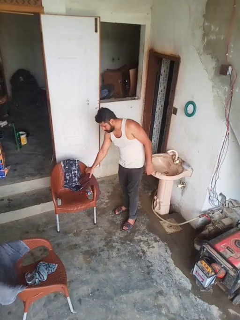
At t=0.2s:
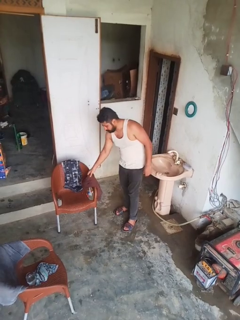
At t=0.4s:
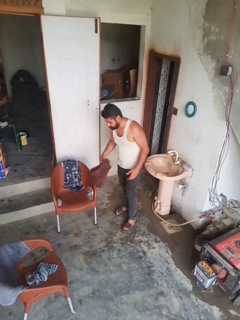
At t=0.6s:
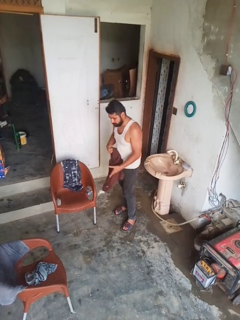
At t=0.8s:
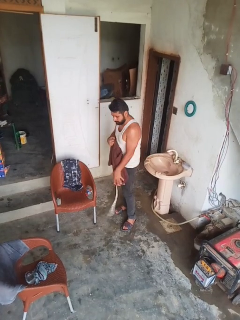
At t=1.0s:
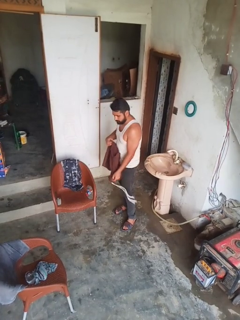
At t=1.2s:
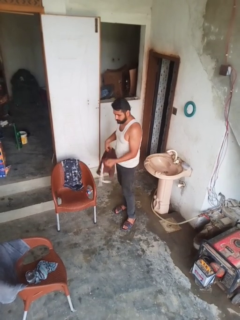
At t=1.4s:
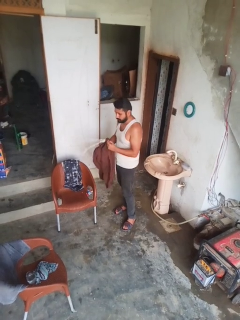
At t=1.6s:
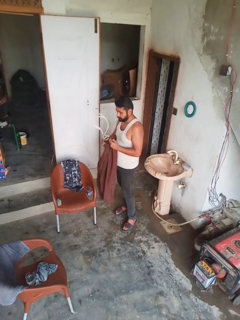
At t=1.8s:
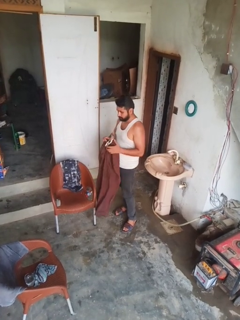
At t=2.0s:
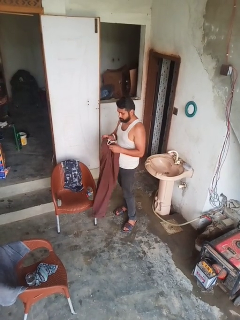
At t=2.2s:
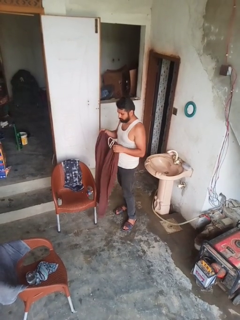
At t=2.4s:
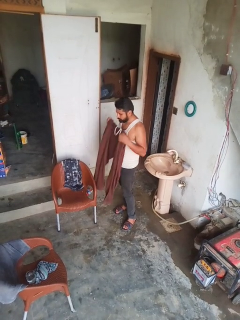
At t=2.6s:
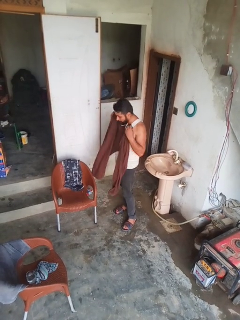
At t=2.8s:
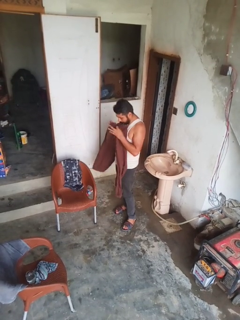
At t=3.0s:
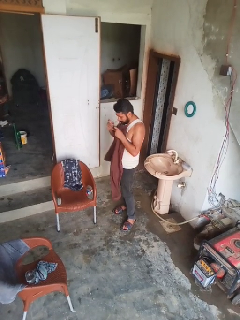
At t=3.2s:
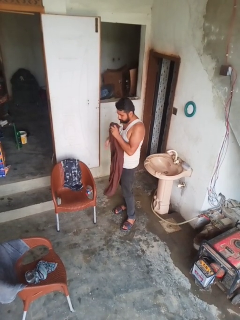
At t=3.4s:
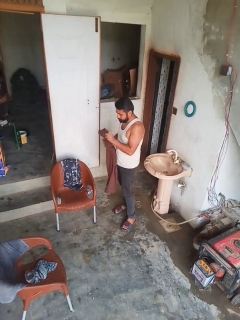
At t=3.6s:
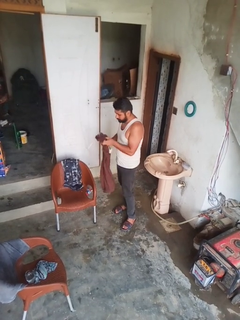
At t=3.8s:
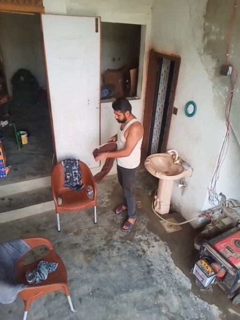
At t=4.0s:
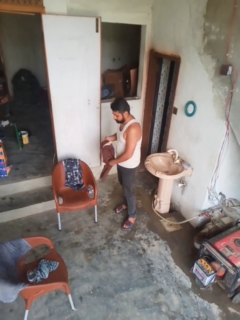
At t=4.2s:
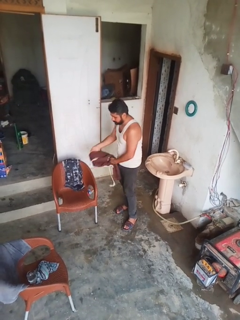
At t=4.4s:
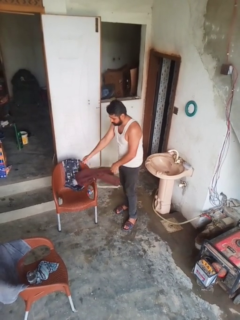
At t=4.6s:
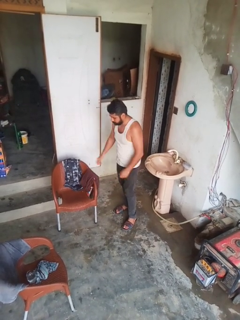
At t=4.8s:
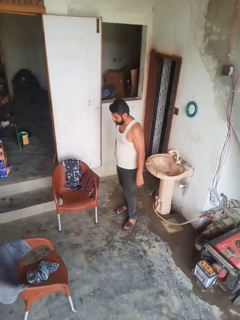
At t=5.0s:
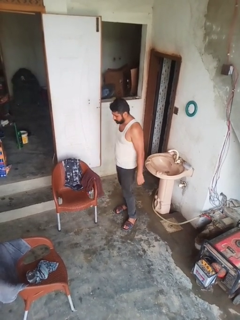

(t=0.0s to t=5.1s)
person folds pants

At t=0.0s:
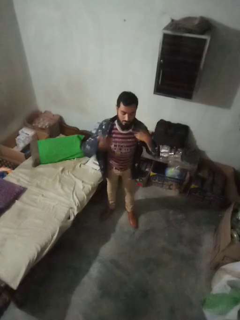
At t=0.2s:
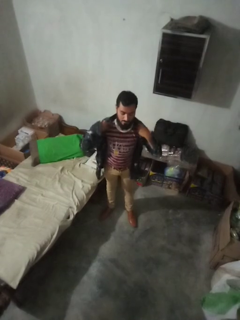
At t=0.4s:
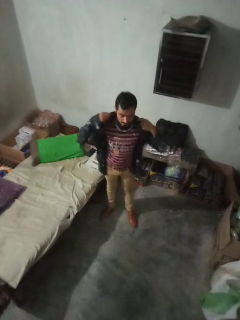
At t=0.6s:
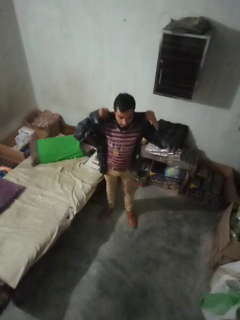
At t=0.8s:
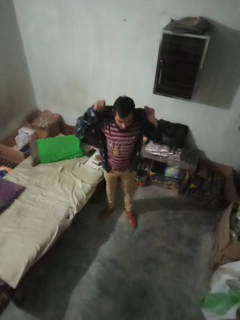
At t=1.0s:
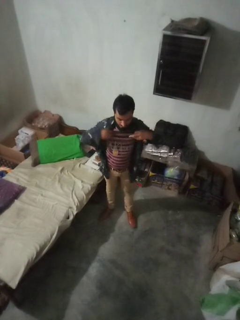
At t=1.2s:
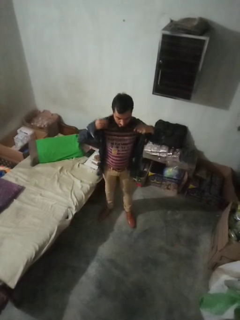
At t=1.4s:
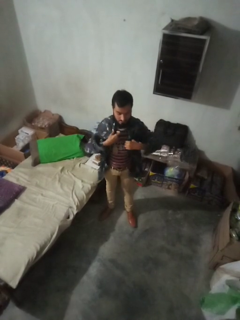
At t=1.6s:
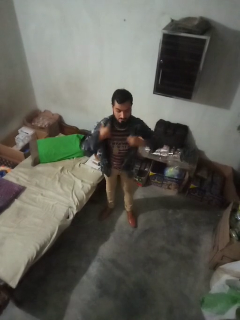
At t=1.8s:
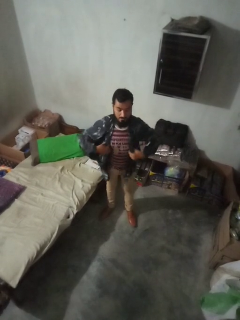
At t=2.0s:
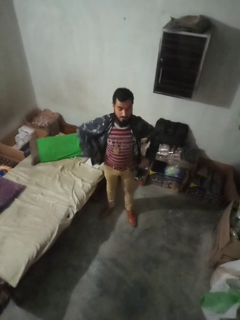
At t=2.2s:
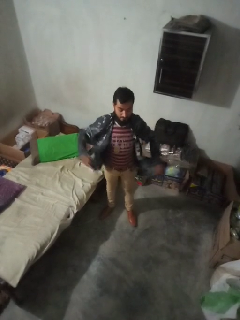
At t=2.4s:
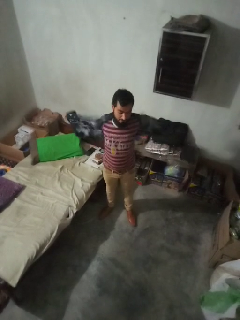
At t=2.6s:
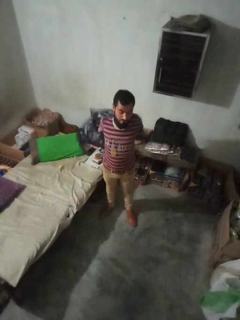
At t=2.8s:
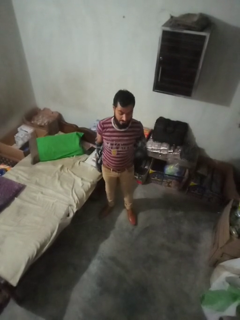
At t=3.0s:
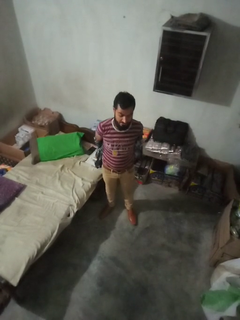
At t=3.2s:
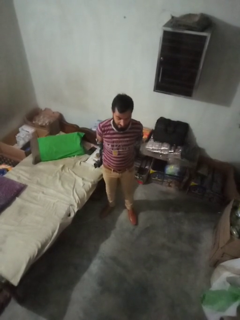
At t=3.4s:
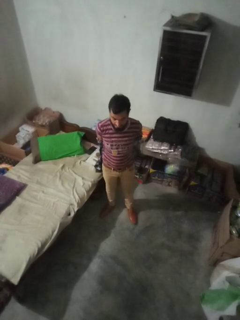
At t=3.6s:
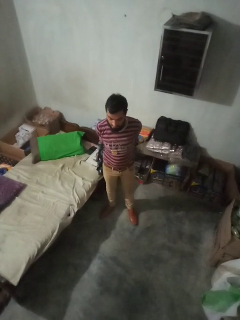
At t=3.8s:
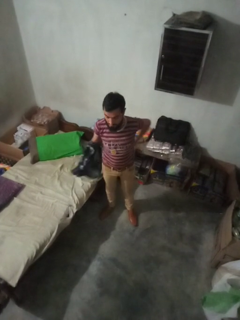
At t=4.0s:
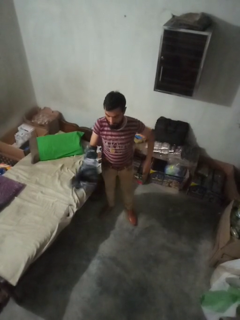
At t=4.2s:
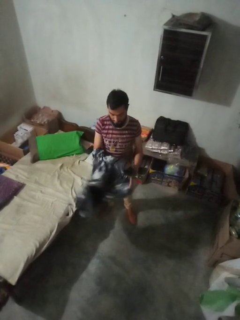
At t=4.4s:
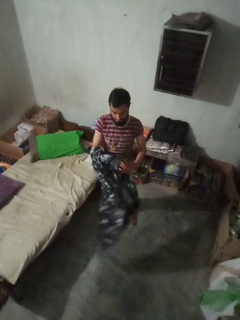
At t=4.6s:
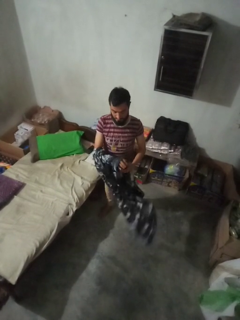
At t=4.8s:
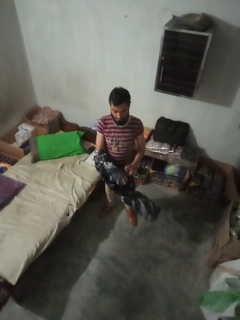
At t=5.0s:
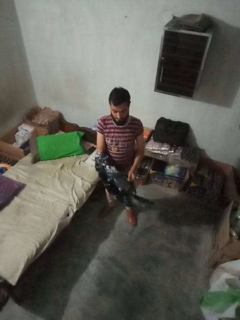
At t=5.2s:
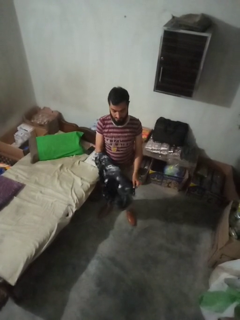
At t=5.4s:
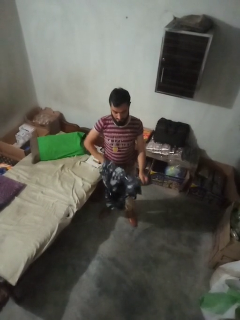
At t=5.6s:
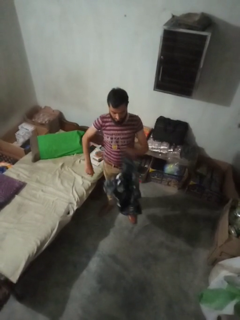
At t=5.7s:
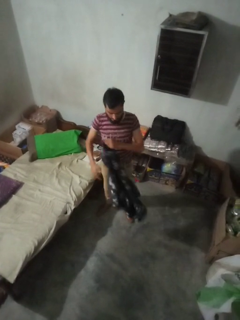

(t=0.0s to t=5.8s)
person takes off shirt

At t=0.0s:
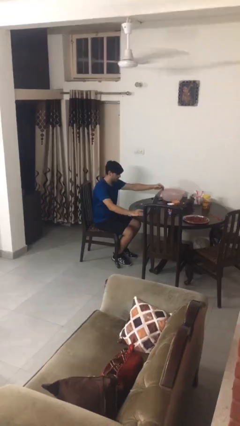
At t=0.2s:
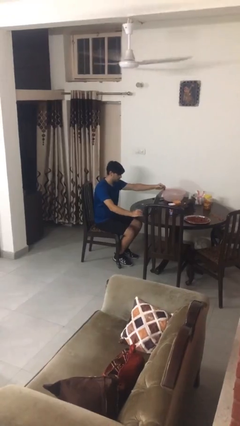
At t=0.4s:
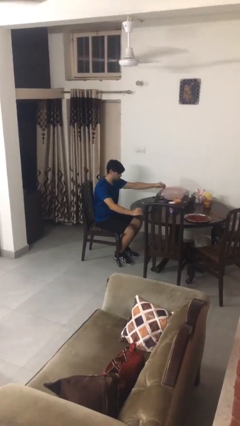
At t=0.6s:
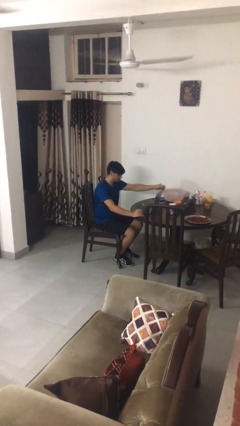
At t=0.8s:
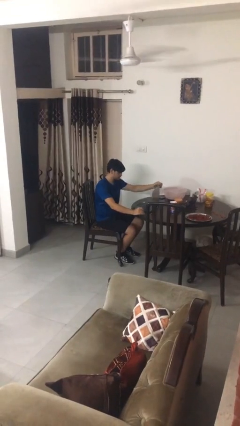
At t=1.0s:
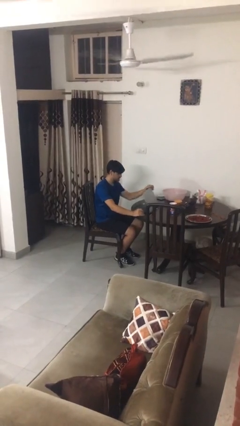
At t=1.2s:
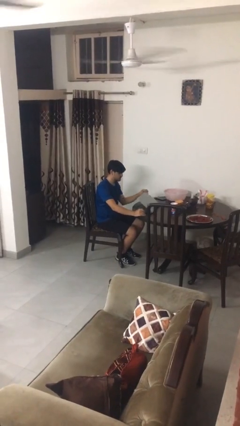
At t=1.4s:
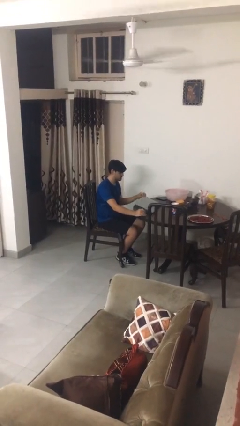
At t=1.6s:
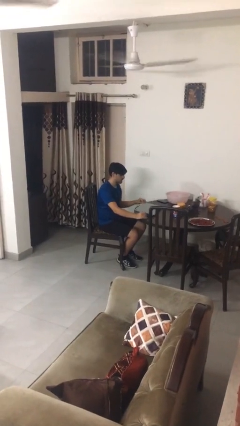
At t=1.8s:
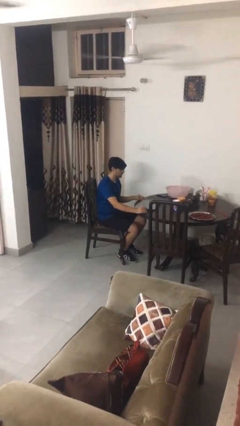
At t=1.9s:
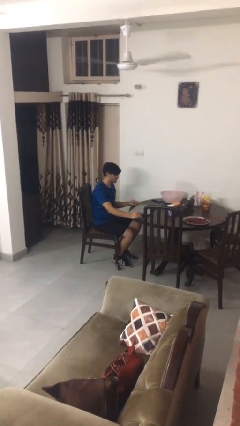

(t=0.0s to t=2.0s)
person closes laptop

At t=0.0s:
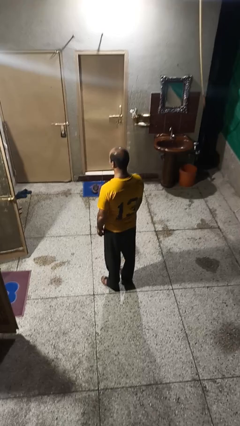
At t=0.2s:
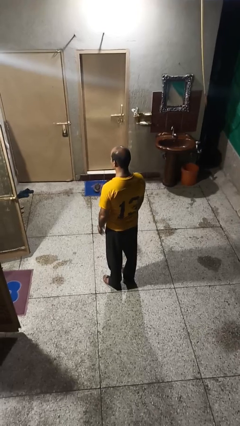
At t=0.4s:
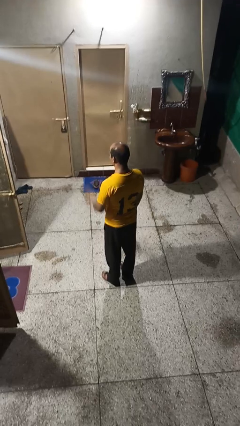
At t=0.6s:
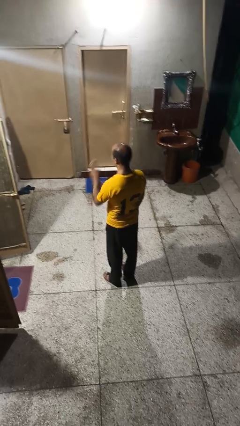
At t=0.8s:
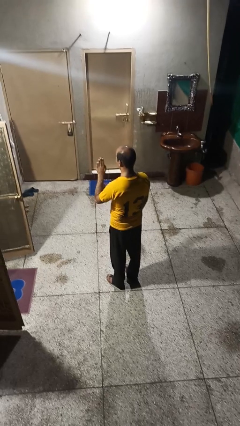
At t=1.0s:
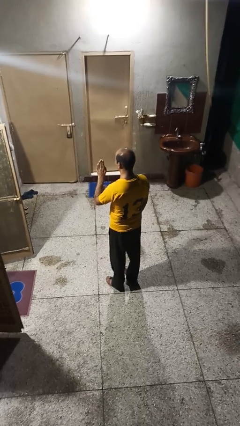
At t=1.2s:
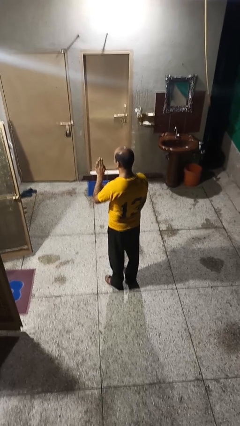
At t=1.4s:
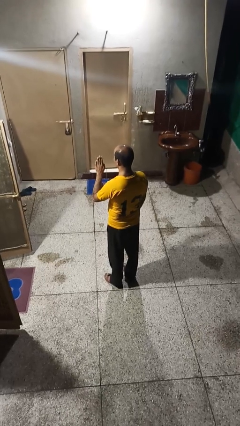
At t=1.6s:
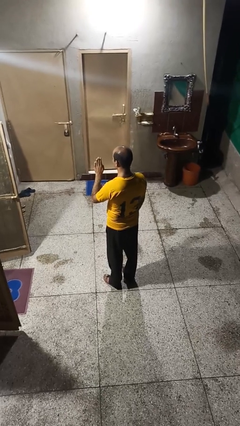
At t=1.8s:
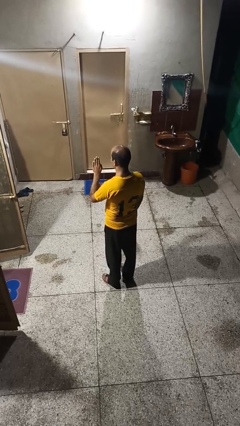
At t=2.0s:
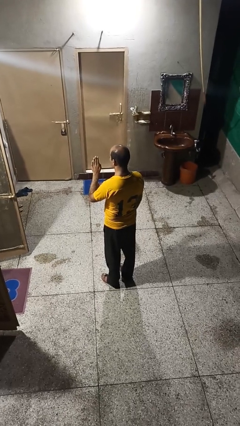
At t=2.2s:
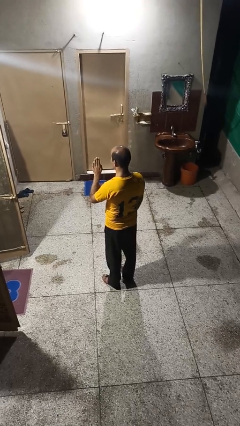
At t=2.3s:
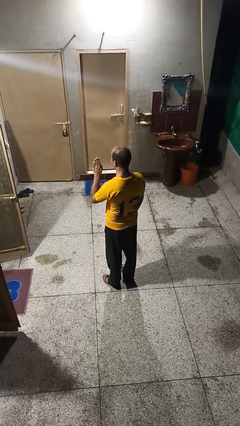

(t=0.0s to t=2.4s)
person gestures stop

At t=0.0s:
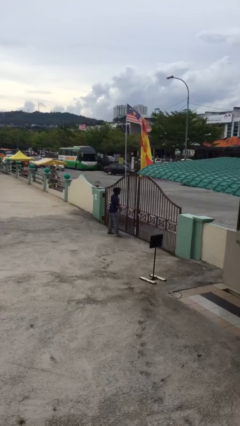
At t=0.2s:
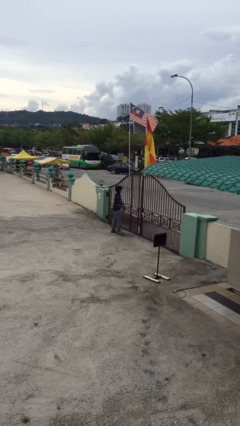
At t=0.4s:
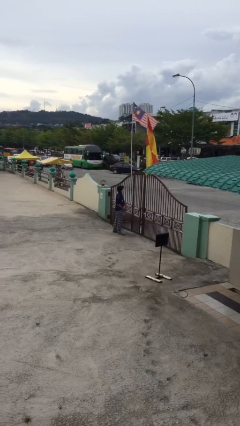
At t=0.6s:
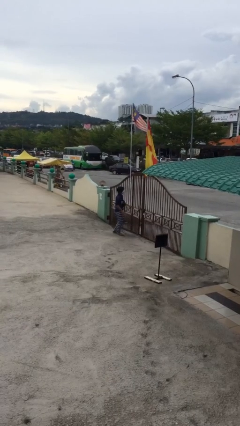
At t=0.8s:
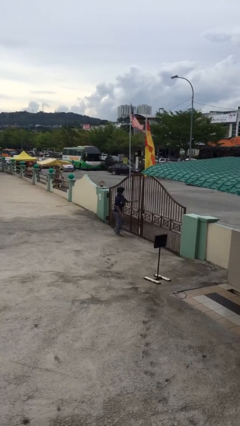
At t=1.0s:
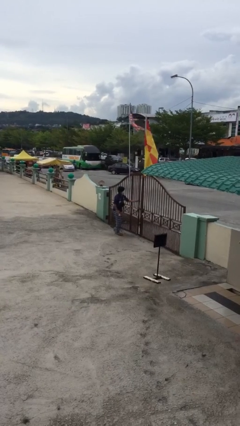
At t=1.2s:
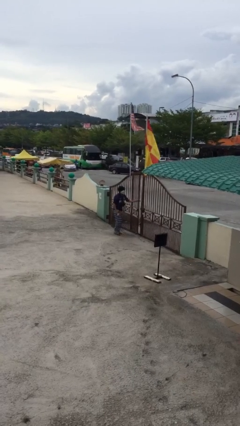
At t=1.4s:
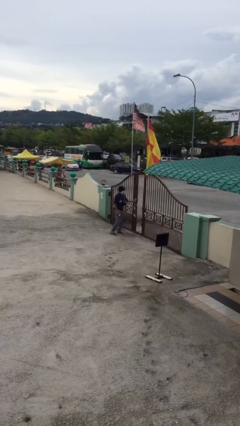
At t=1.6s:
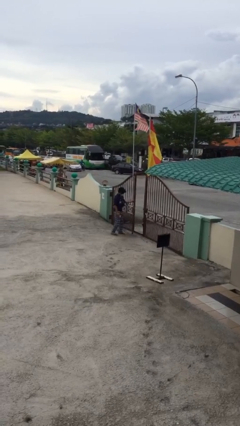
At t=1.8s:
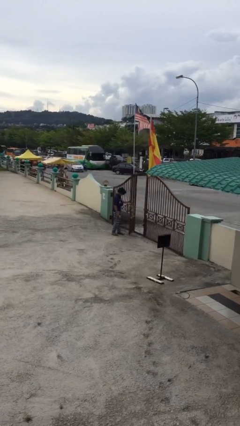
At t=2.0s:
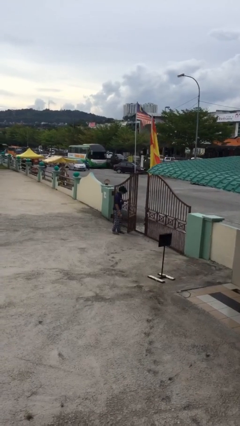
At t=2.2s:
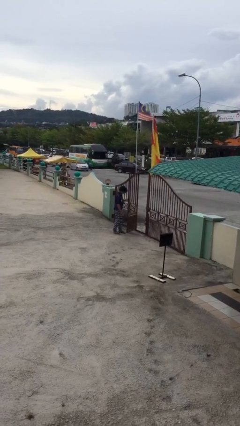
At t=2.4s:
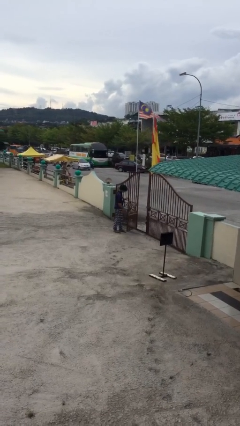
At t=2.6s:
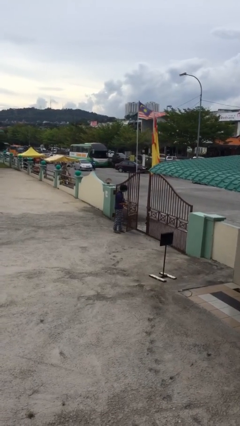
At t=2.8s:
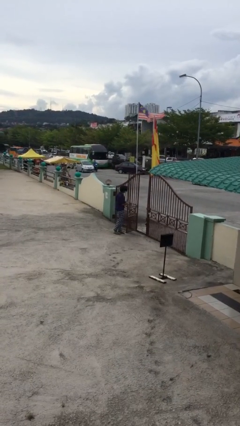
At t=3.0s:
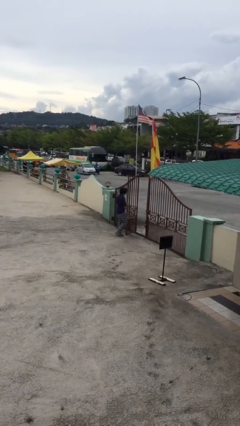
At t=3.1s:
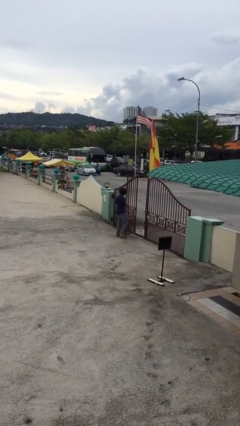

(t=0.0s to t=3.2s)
person opens facility door

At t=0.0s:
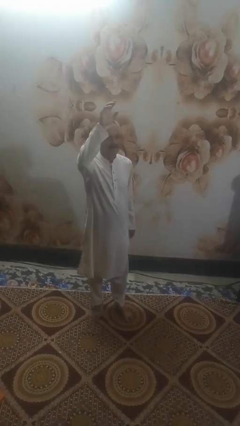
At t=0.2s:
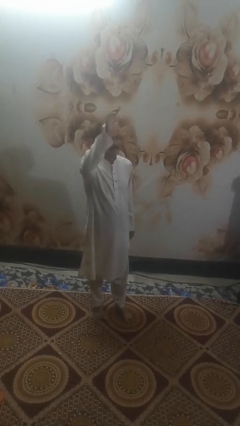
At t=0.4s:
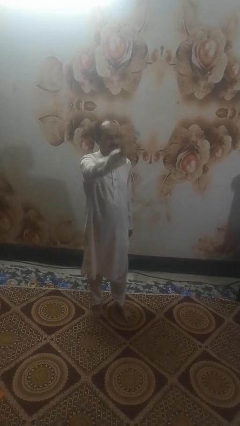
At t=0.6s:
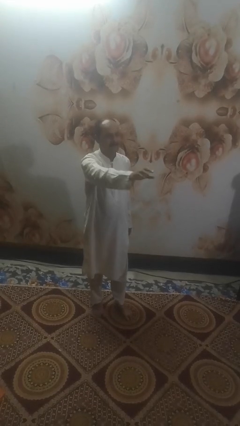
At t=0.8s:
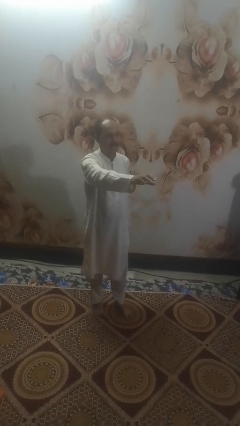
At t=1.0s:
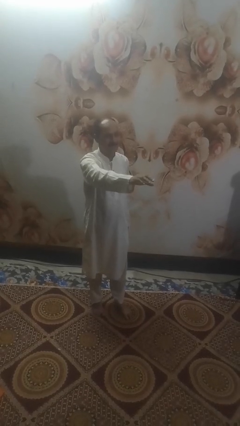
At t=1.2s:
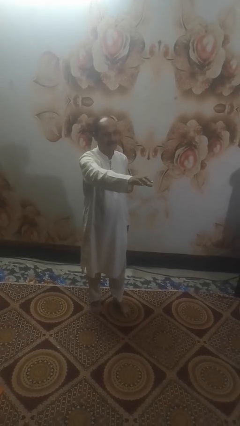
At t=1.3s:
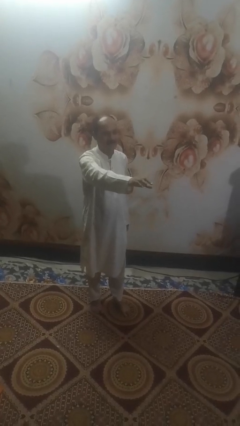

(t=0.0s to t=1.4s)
person gestures swipe down
